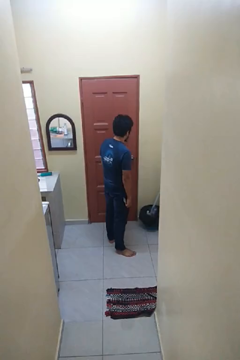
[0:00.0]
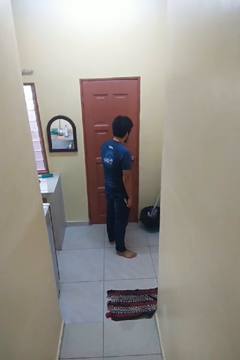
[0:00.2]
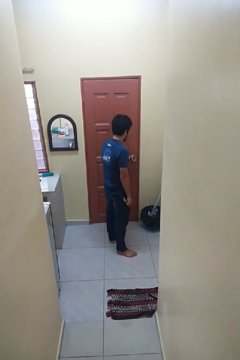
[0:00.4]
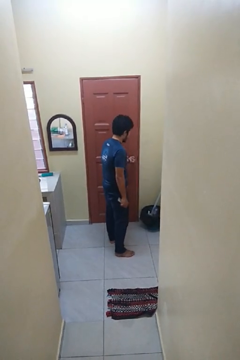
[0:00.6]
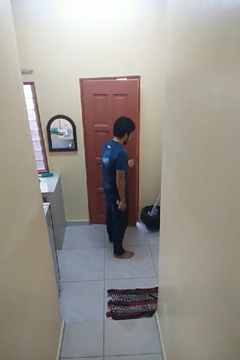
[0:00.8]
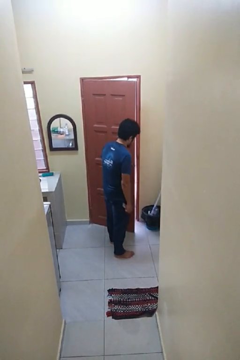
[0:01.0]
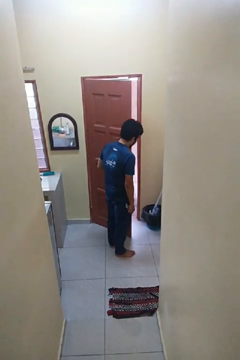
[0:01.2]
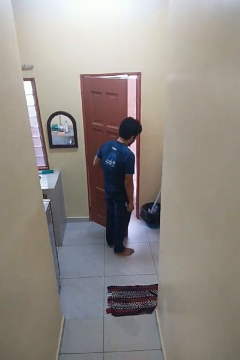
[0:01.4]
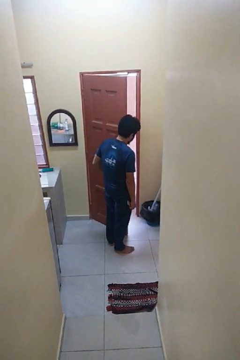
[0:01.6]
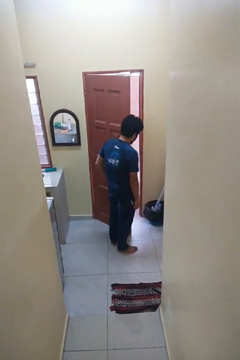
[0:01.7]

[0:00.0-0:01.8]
person opens facility door

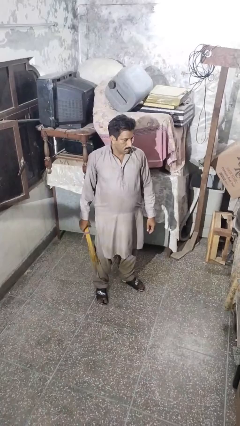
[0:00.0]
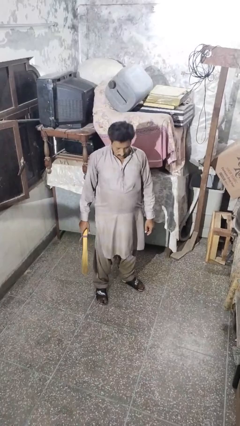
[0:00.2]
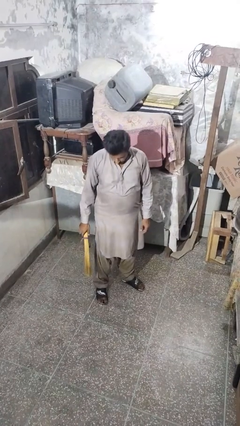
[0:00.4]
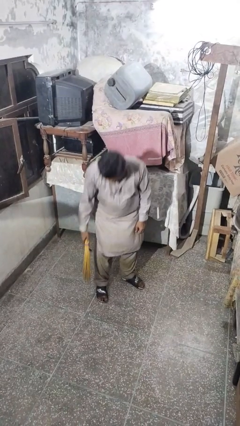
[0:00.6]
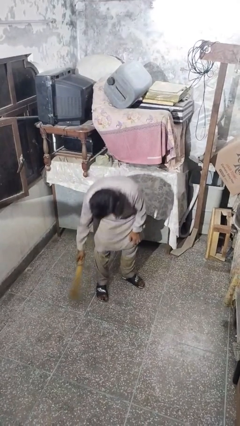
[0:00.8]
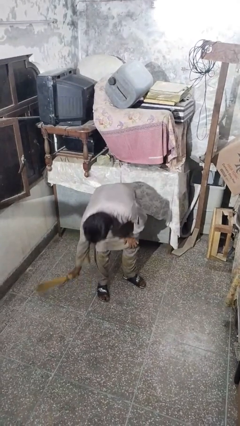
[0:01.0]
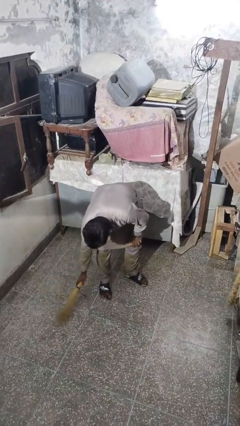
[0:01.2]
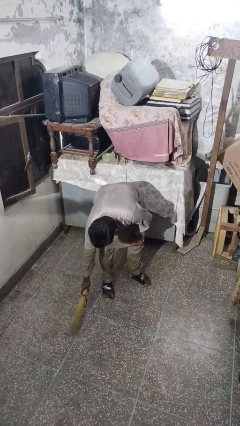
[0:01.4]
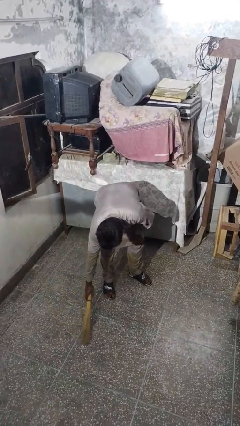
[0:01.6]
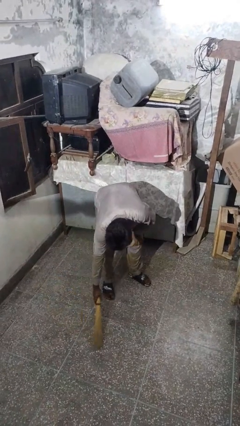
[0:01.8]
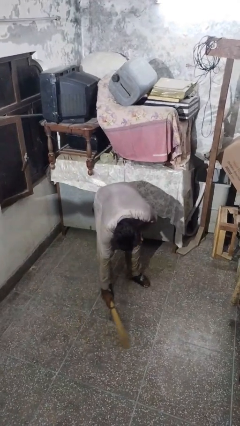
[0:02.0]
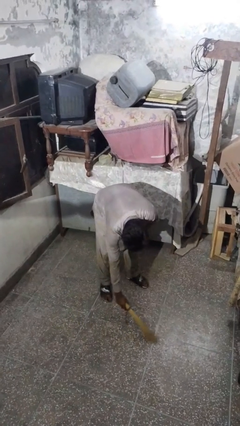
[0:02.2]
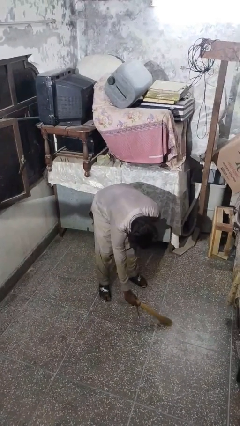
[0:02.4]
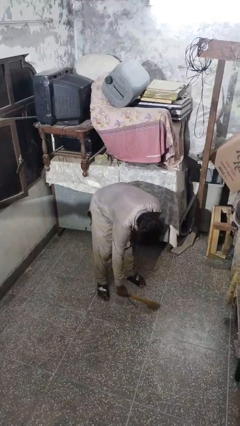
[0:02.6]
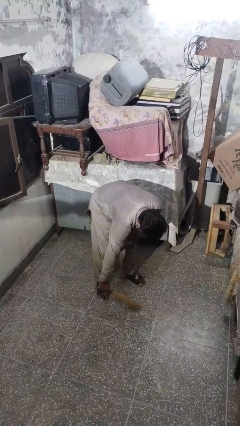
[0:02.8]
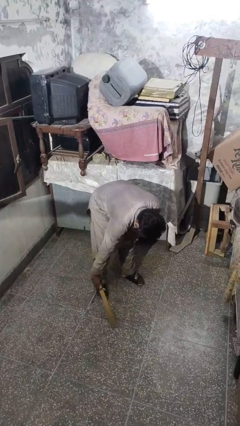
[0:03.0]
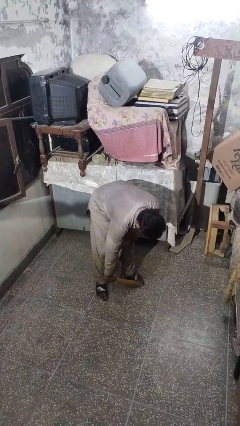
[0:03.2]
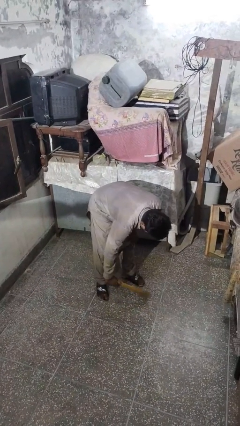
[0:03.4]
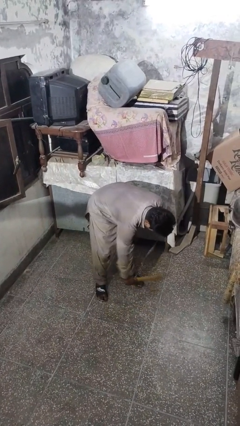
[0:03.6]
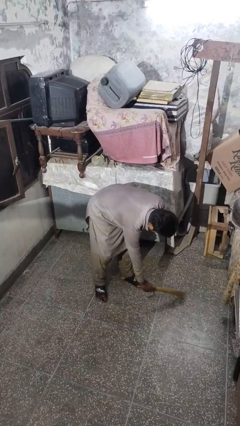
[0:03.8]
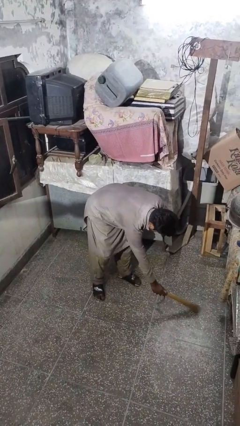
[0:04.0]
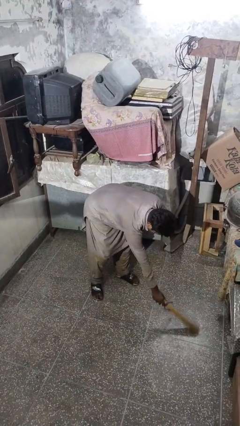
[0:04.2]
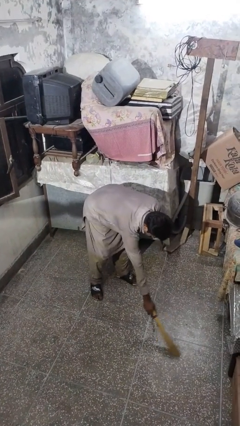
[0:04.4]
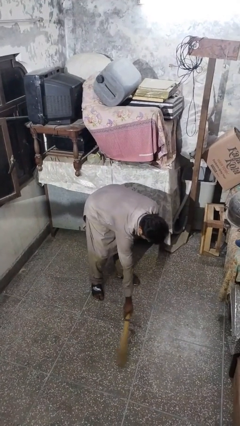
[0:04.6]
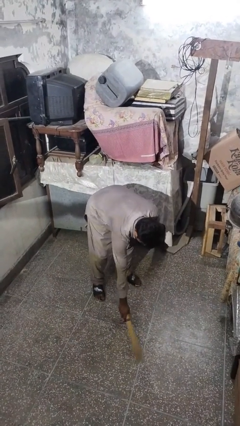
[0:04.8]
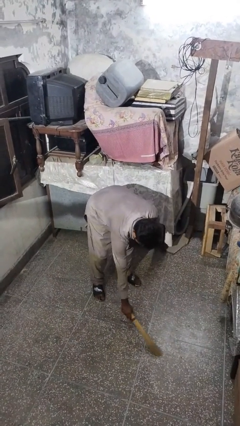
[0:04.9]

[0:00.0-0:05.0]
person sweeps floor

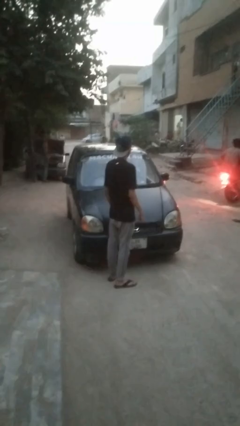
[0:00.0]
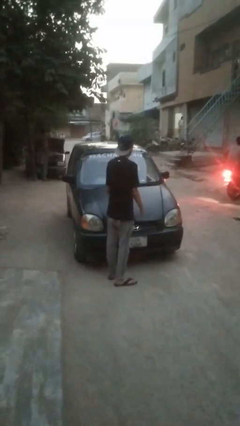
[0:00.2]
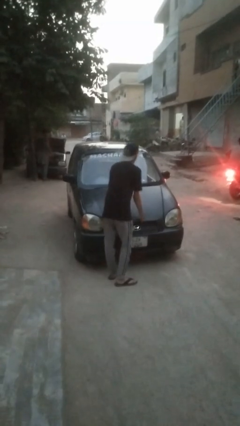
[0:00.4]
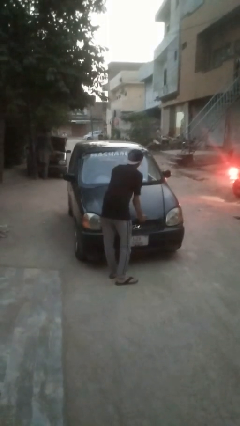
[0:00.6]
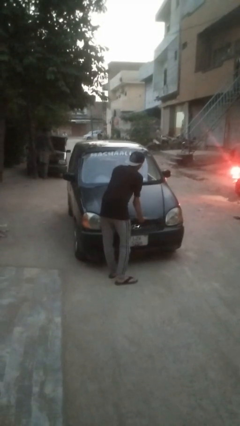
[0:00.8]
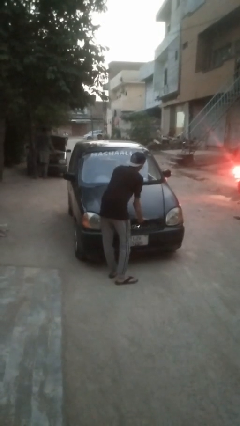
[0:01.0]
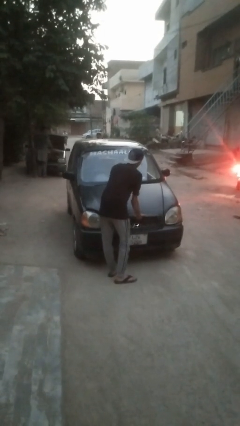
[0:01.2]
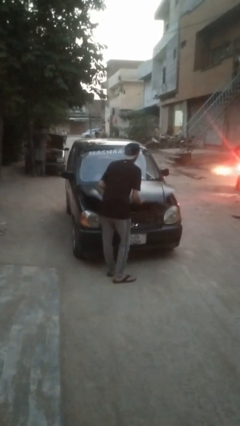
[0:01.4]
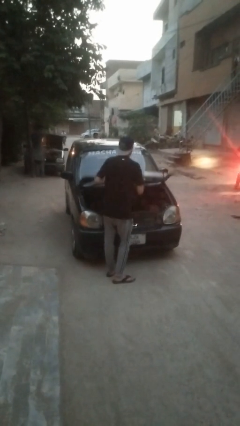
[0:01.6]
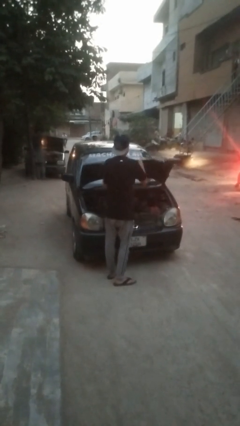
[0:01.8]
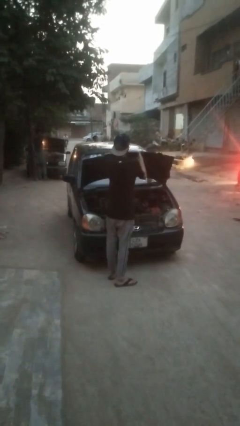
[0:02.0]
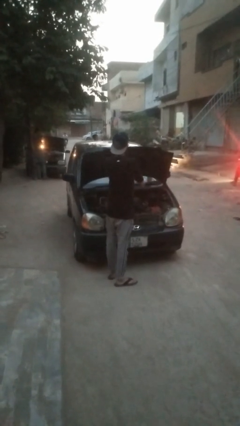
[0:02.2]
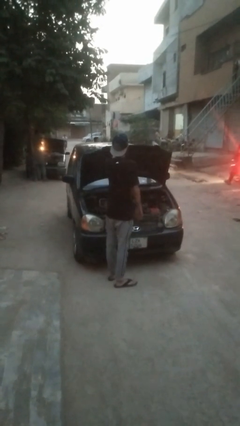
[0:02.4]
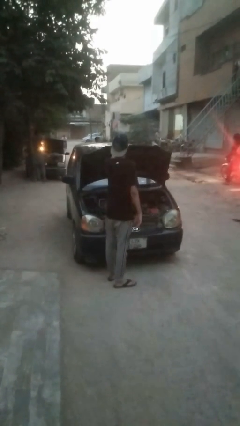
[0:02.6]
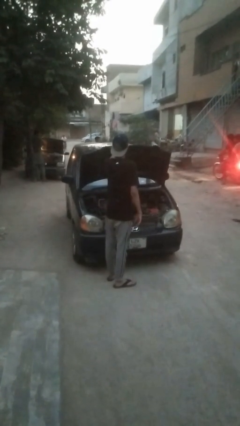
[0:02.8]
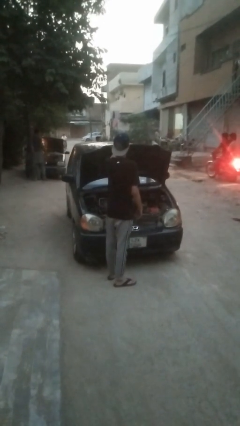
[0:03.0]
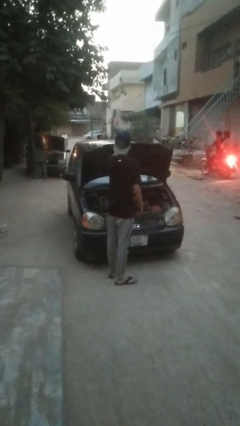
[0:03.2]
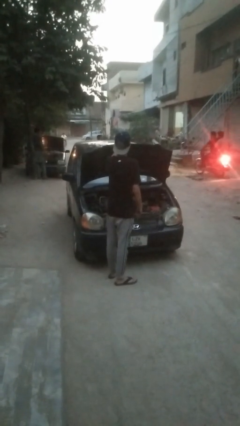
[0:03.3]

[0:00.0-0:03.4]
person opens car hood

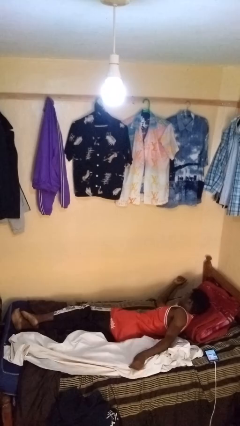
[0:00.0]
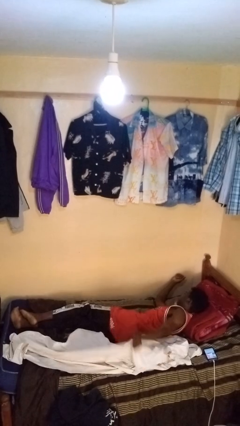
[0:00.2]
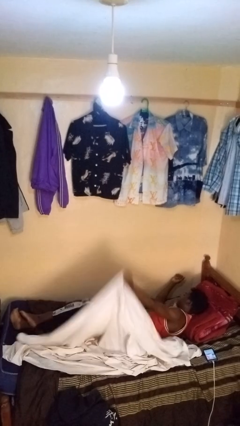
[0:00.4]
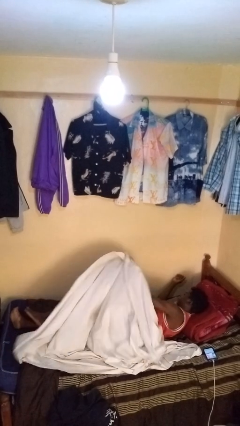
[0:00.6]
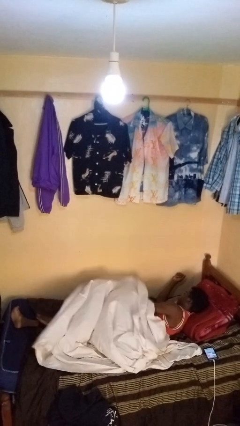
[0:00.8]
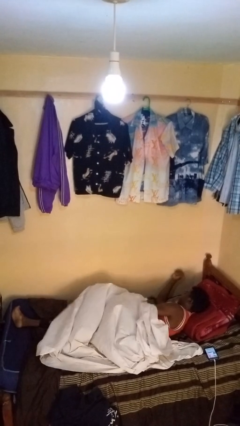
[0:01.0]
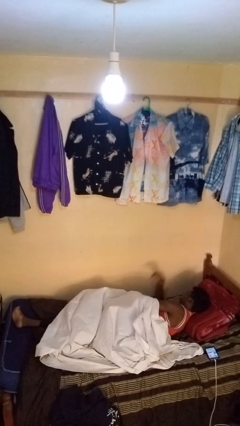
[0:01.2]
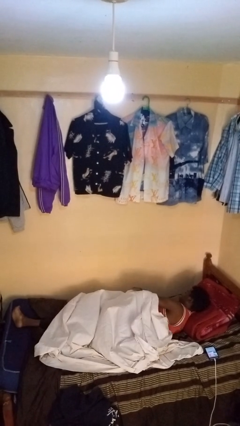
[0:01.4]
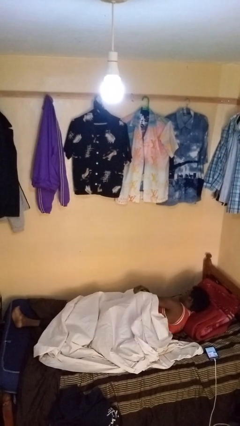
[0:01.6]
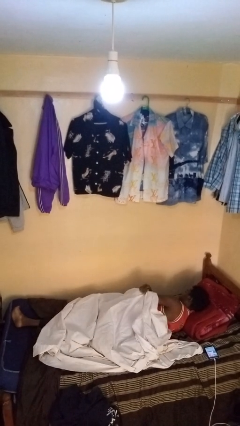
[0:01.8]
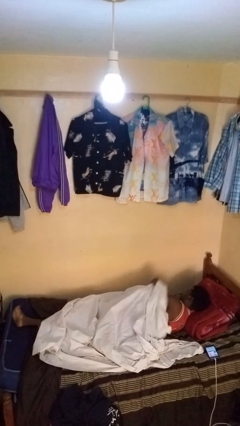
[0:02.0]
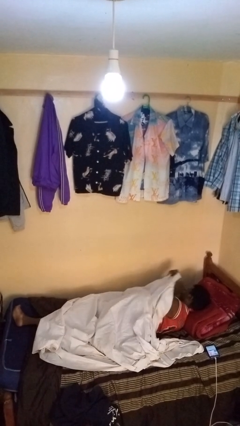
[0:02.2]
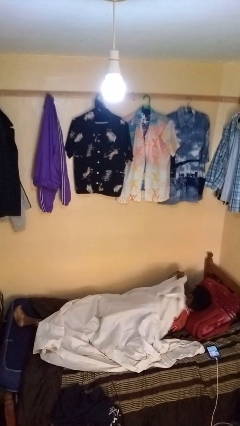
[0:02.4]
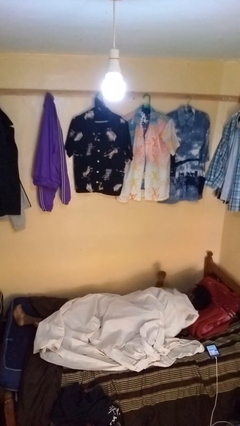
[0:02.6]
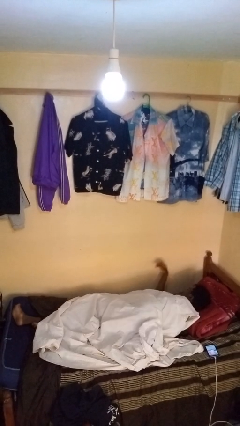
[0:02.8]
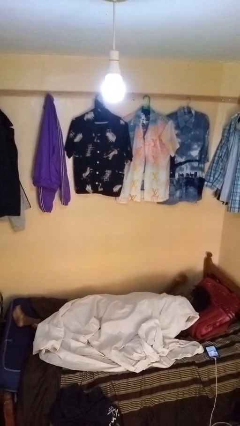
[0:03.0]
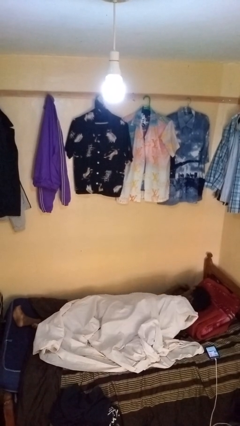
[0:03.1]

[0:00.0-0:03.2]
person covers with bedsheets

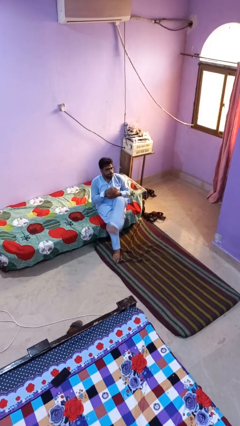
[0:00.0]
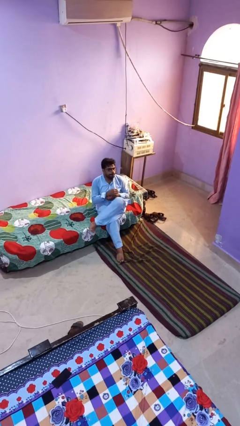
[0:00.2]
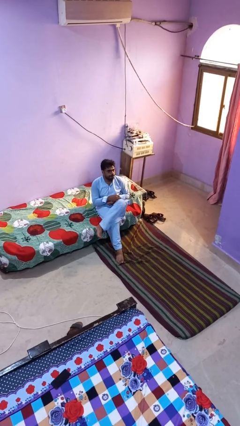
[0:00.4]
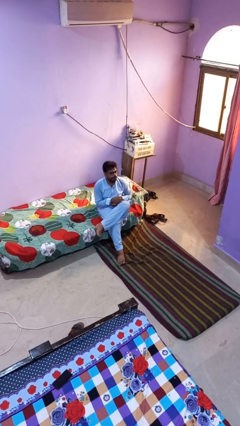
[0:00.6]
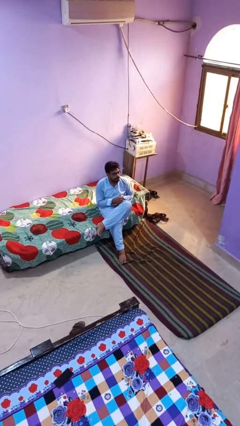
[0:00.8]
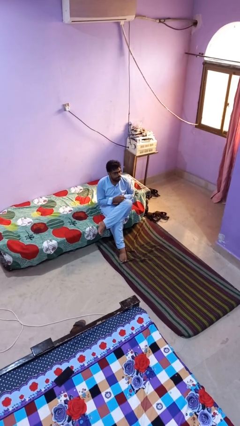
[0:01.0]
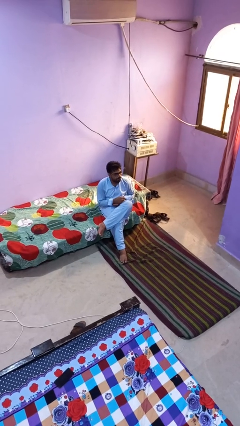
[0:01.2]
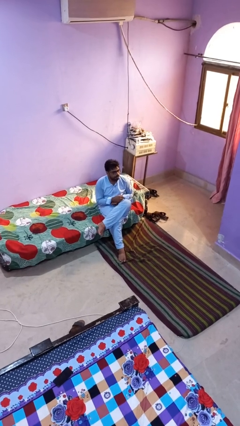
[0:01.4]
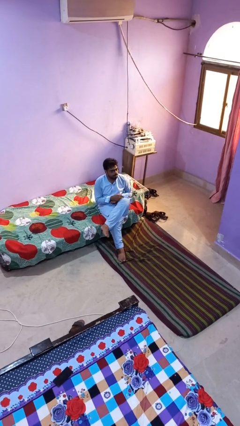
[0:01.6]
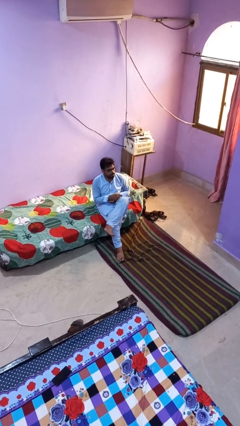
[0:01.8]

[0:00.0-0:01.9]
person crosses legs

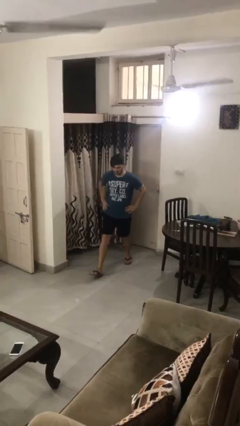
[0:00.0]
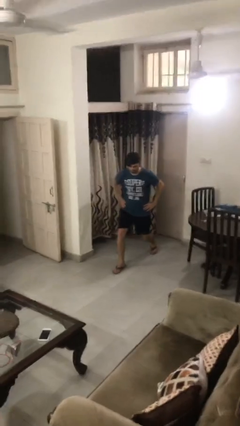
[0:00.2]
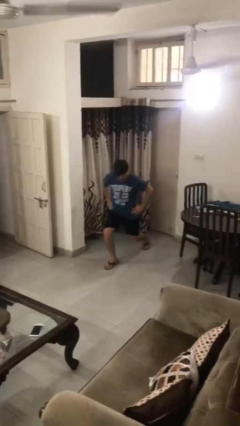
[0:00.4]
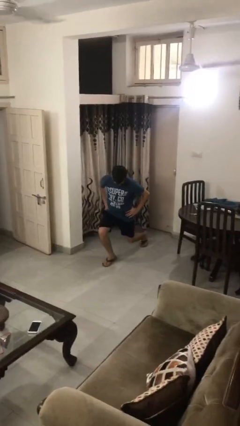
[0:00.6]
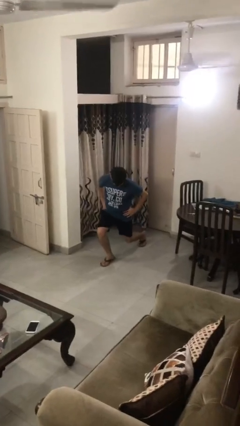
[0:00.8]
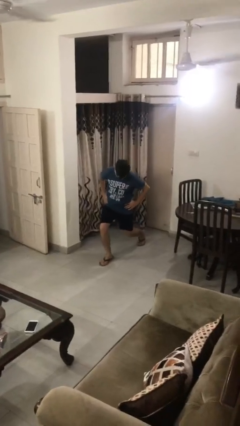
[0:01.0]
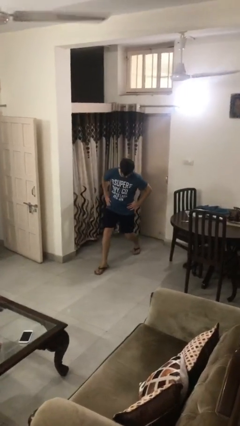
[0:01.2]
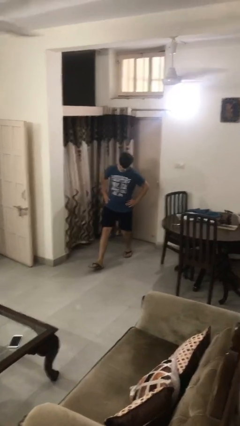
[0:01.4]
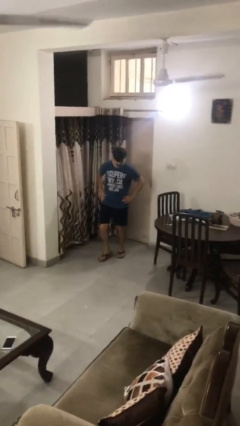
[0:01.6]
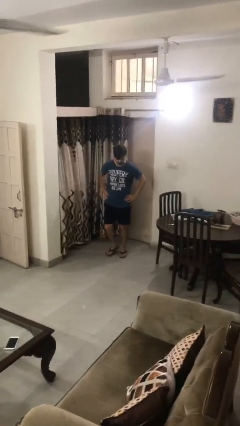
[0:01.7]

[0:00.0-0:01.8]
person exercises with lunges

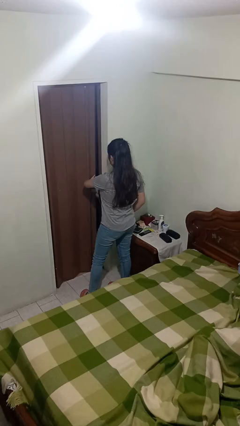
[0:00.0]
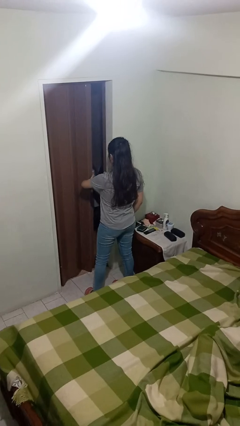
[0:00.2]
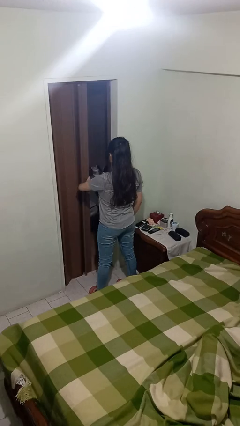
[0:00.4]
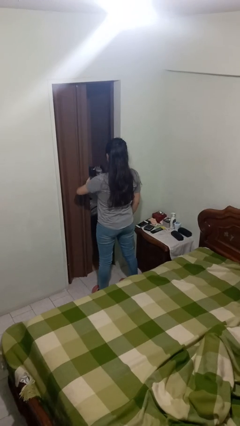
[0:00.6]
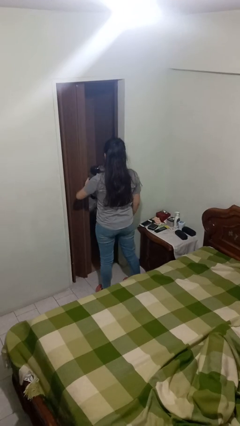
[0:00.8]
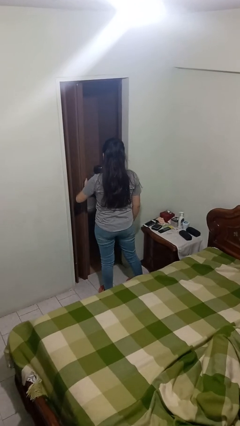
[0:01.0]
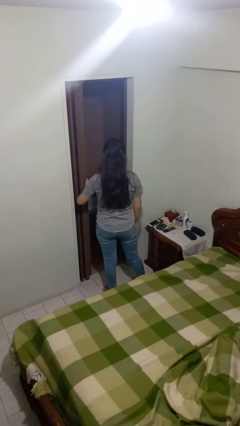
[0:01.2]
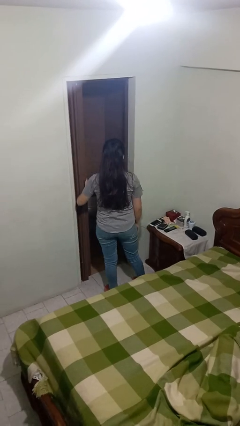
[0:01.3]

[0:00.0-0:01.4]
person opens sliding door
